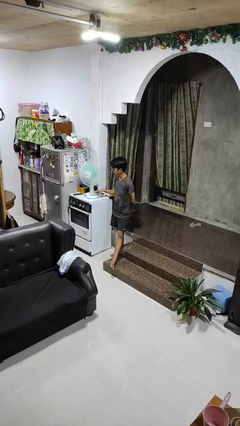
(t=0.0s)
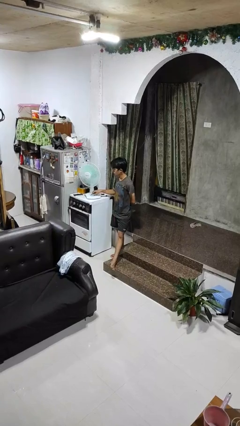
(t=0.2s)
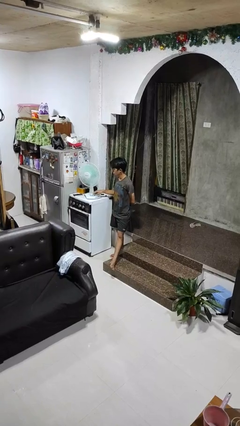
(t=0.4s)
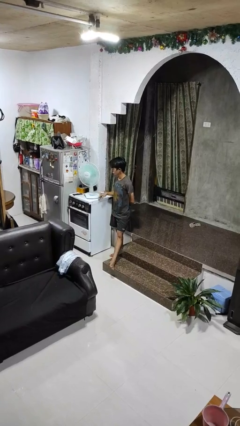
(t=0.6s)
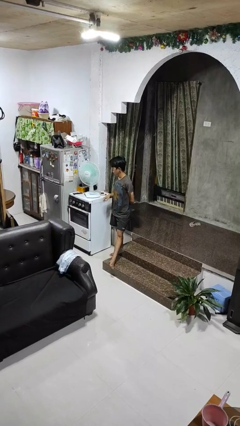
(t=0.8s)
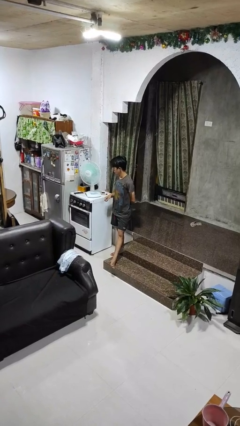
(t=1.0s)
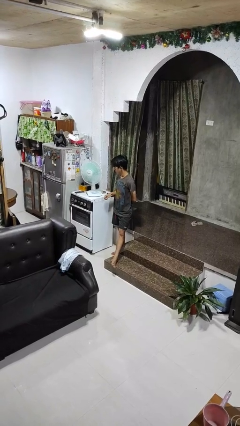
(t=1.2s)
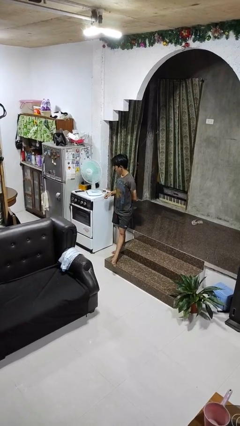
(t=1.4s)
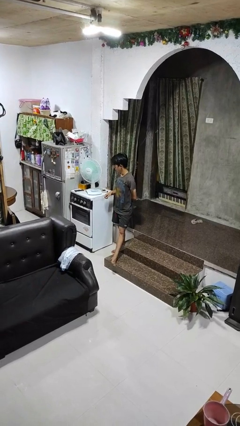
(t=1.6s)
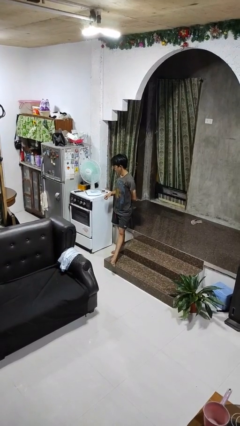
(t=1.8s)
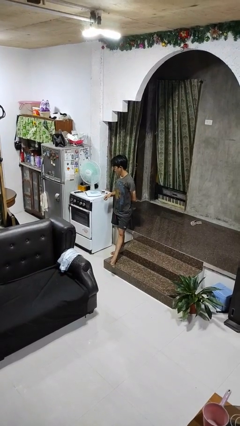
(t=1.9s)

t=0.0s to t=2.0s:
person turns off fan

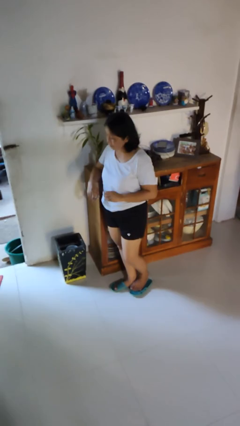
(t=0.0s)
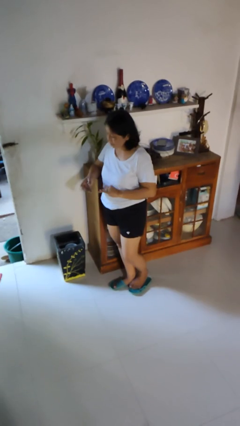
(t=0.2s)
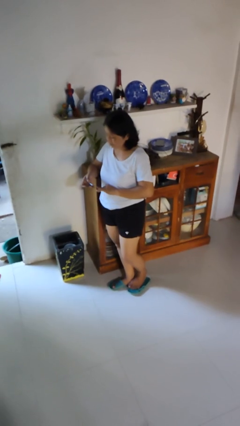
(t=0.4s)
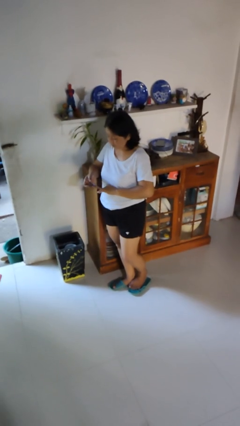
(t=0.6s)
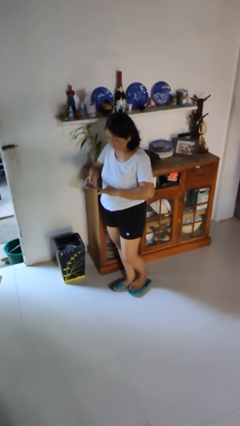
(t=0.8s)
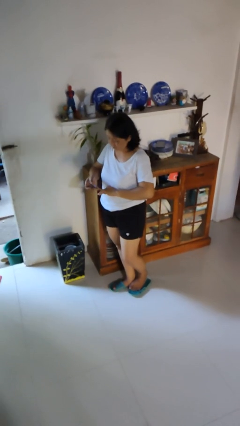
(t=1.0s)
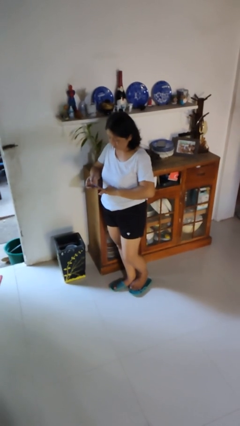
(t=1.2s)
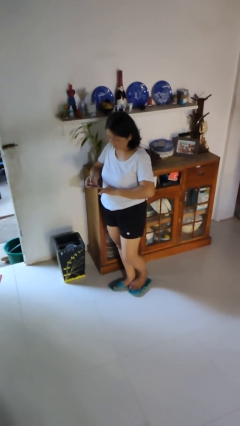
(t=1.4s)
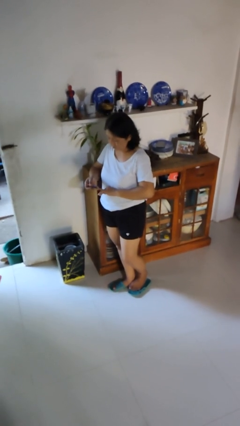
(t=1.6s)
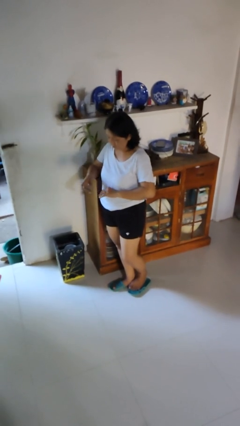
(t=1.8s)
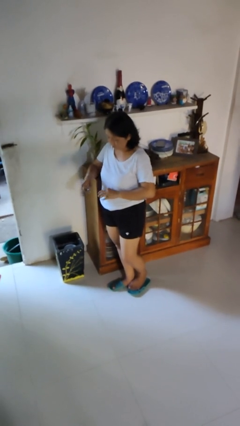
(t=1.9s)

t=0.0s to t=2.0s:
person clips fingernails

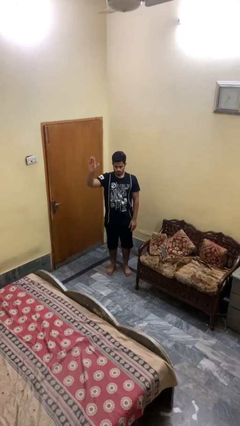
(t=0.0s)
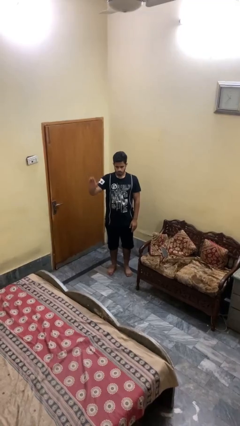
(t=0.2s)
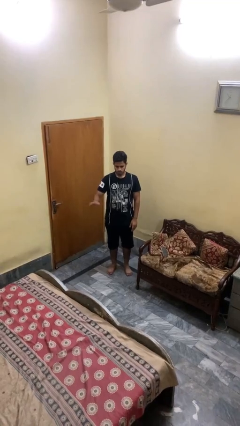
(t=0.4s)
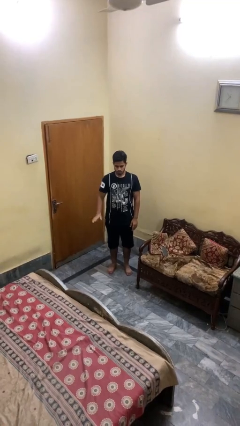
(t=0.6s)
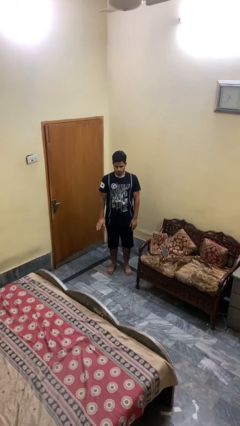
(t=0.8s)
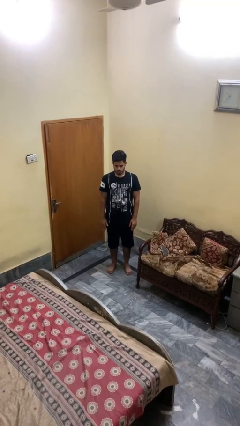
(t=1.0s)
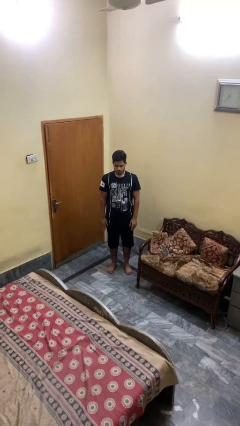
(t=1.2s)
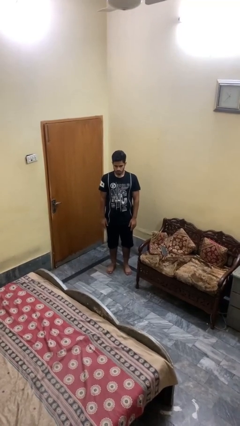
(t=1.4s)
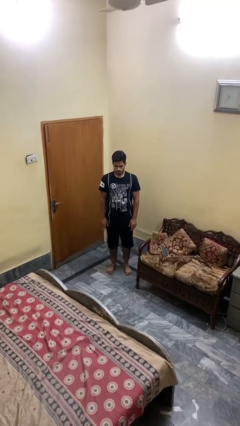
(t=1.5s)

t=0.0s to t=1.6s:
person gestures lower hand

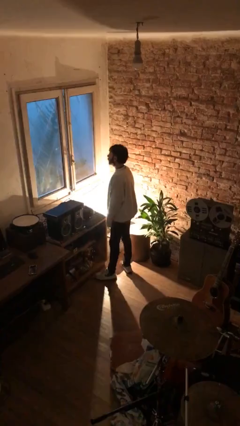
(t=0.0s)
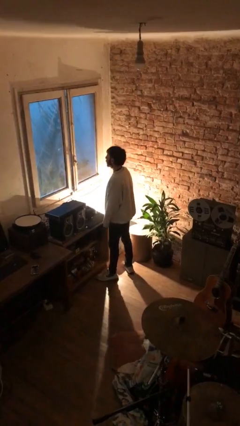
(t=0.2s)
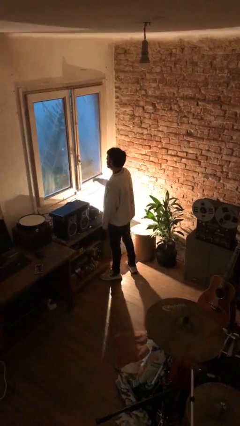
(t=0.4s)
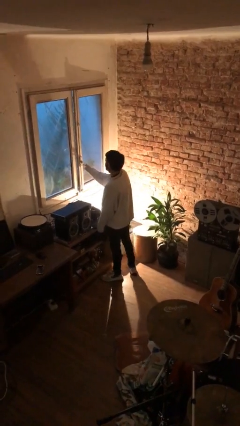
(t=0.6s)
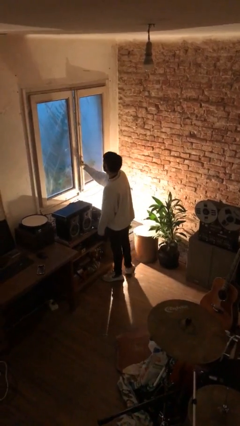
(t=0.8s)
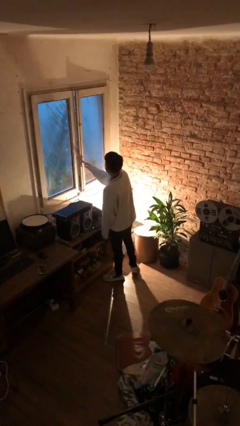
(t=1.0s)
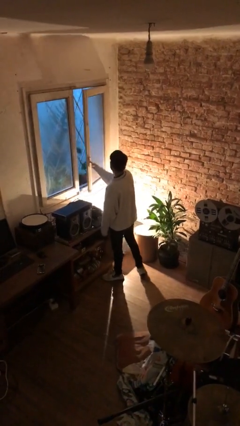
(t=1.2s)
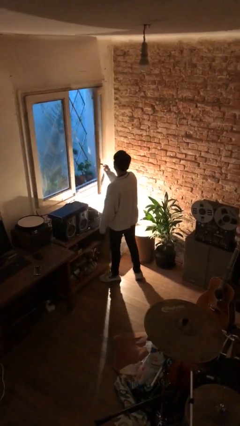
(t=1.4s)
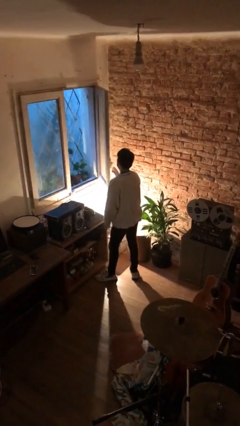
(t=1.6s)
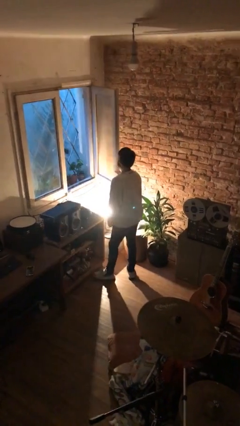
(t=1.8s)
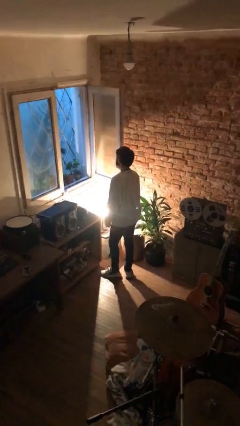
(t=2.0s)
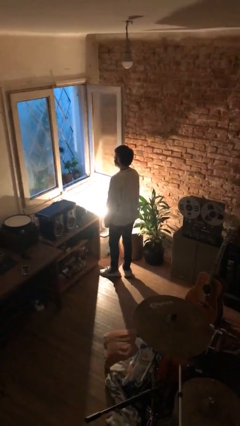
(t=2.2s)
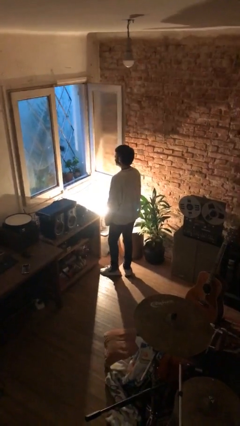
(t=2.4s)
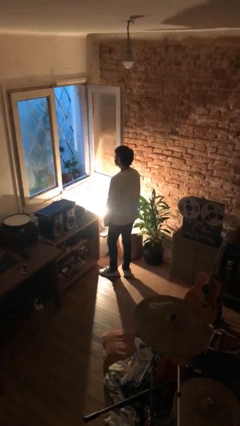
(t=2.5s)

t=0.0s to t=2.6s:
person opens home window

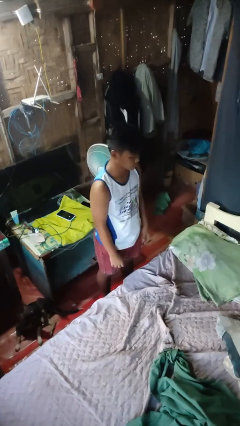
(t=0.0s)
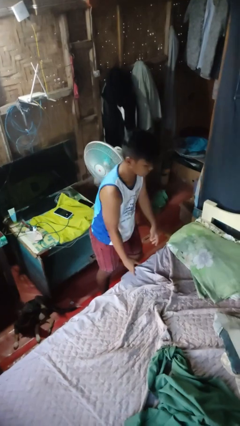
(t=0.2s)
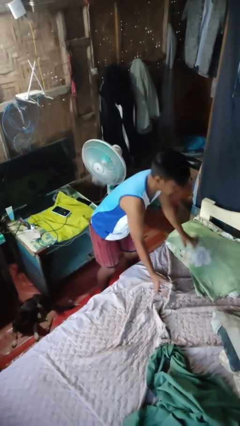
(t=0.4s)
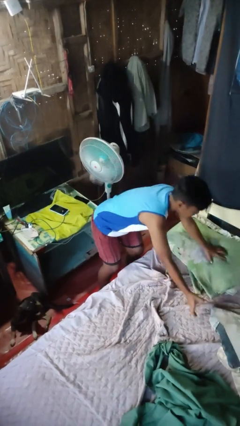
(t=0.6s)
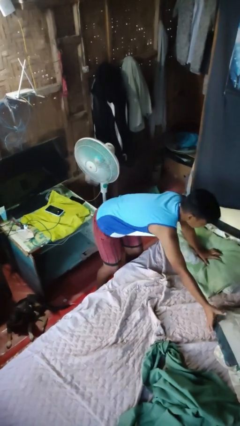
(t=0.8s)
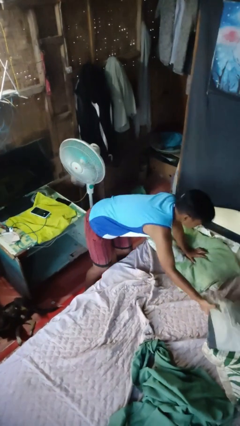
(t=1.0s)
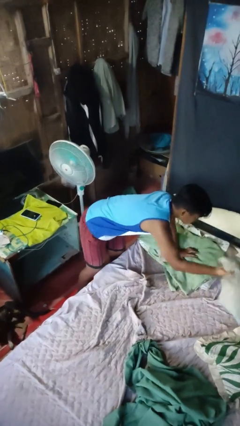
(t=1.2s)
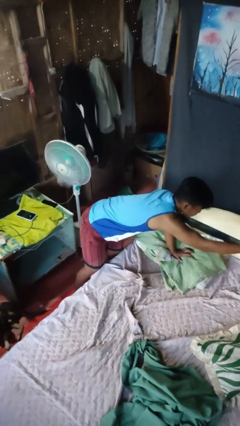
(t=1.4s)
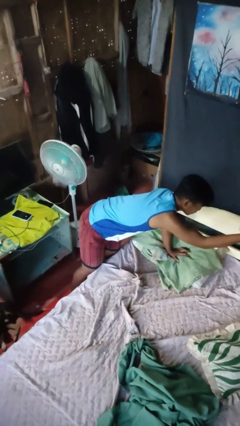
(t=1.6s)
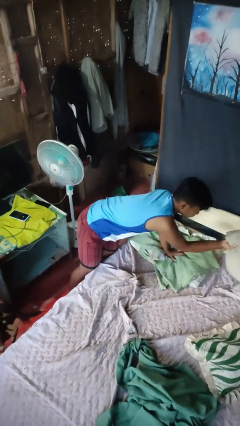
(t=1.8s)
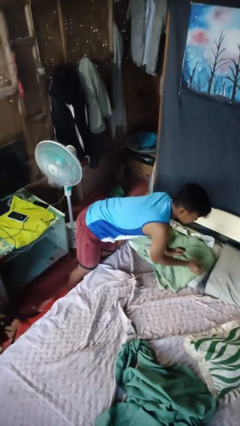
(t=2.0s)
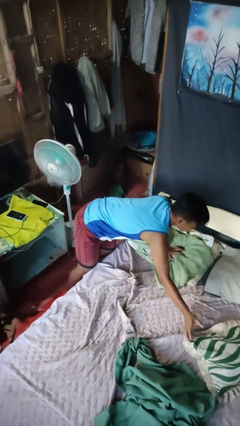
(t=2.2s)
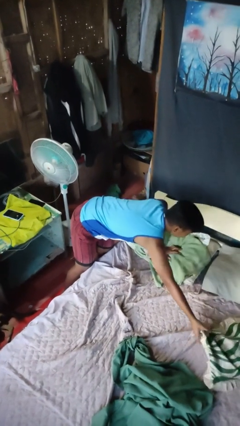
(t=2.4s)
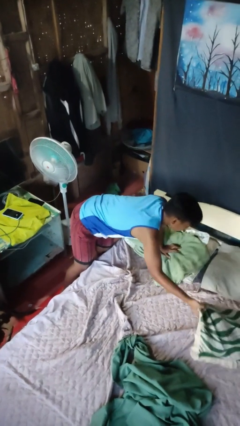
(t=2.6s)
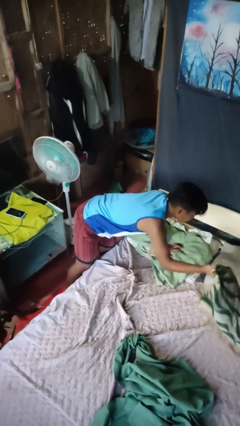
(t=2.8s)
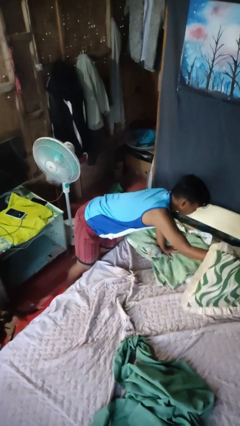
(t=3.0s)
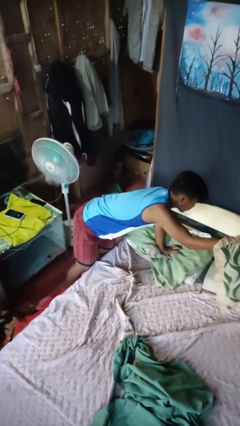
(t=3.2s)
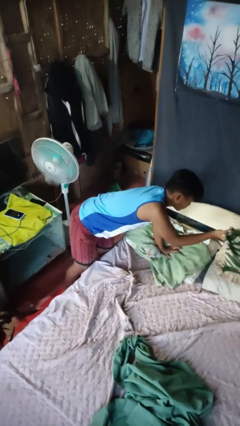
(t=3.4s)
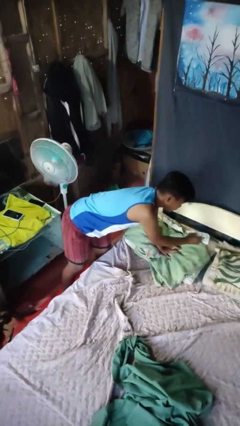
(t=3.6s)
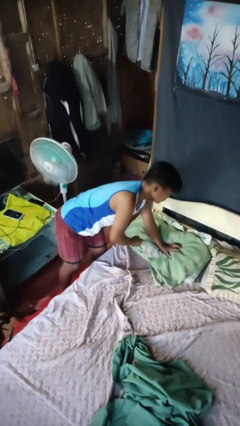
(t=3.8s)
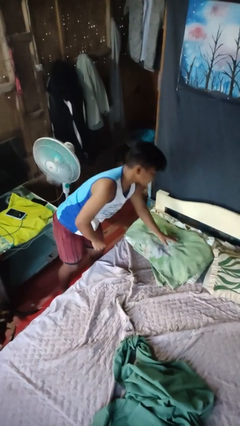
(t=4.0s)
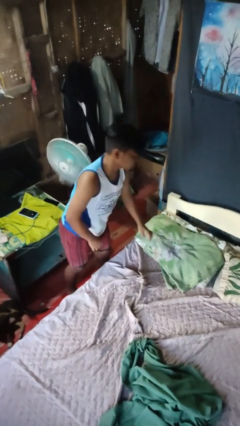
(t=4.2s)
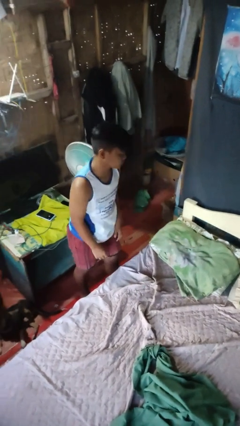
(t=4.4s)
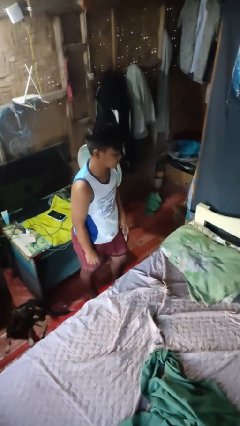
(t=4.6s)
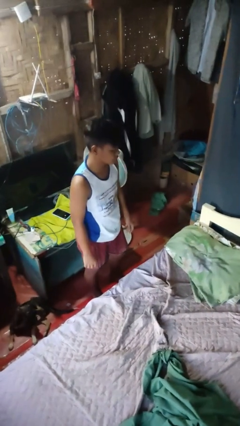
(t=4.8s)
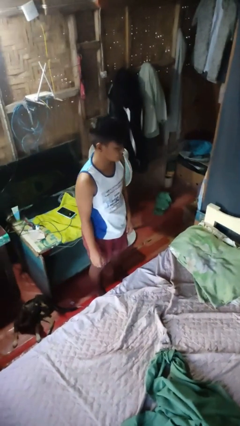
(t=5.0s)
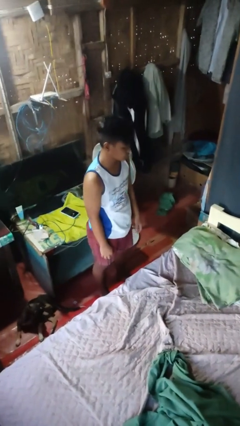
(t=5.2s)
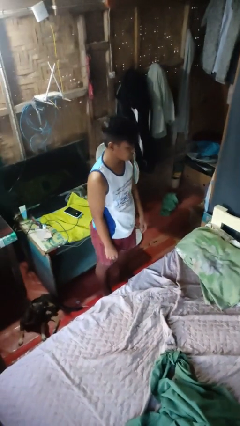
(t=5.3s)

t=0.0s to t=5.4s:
person makes bed

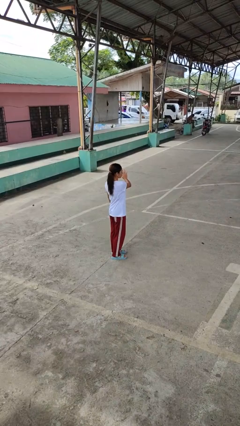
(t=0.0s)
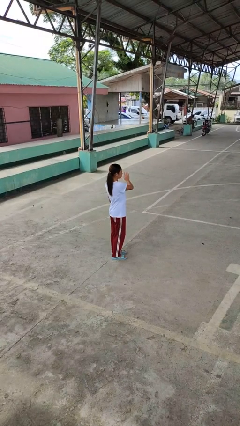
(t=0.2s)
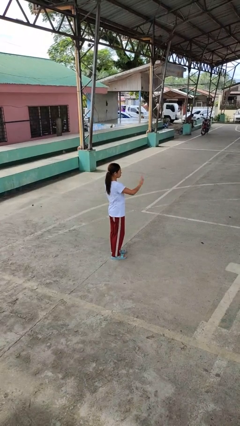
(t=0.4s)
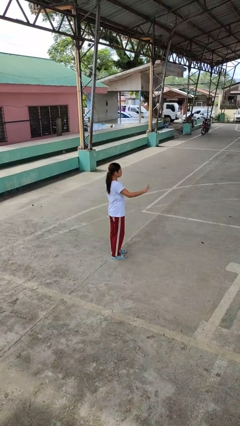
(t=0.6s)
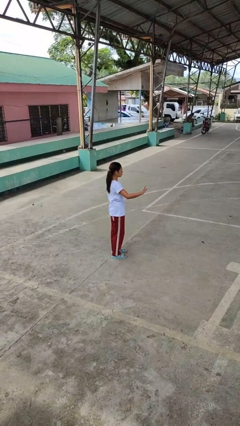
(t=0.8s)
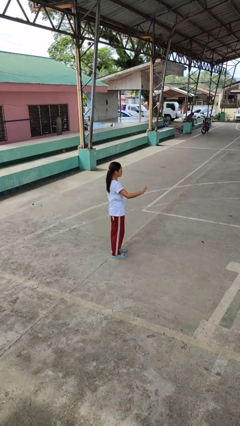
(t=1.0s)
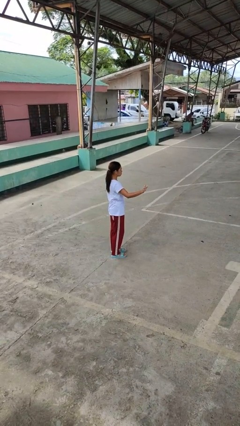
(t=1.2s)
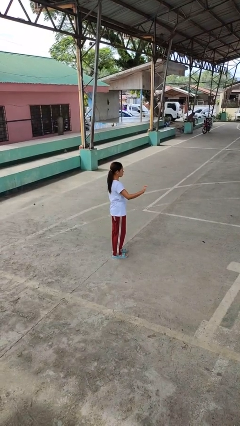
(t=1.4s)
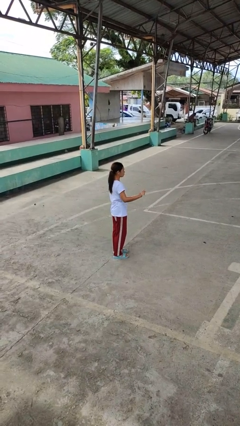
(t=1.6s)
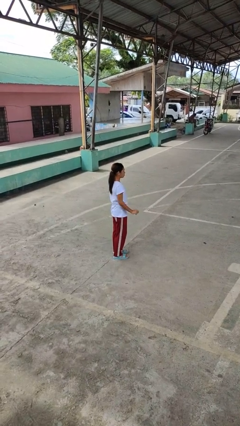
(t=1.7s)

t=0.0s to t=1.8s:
person gestures swipe right

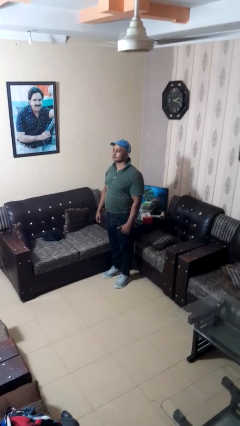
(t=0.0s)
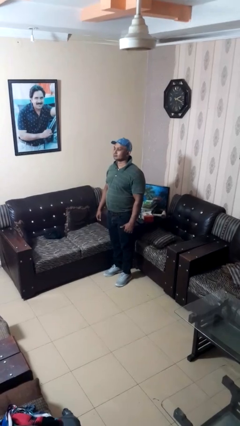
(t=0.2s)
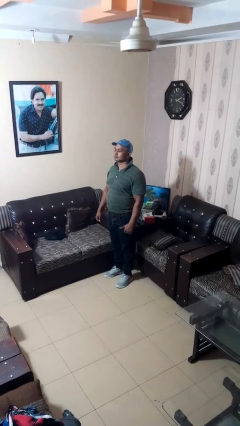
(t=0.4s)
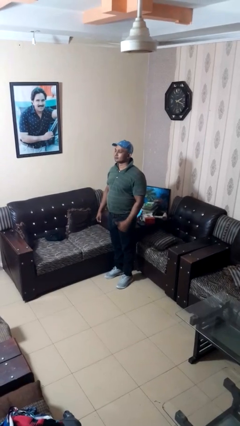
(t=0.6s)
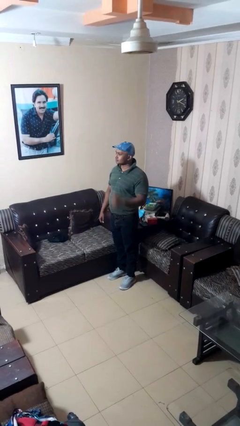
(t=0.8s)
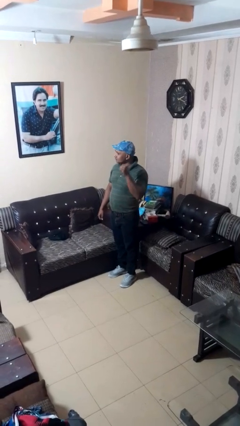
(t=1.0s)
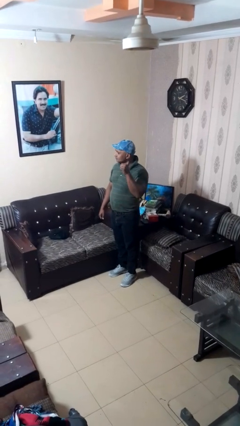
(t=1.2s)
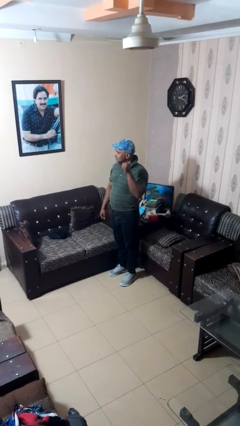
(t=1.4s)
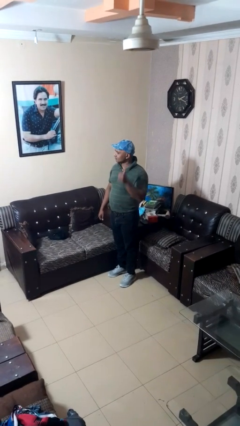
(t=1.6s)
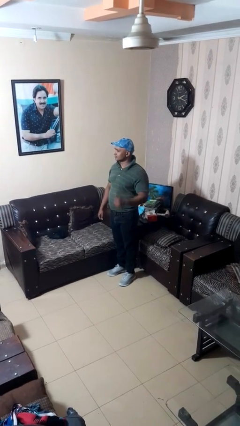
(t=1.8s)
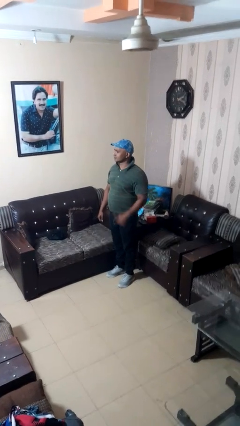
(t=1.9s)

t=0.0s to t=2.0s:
person gestures behind me
